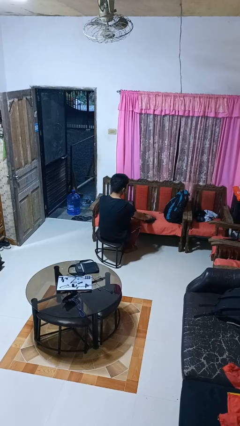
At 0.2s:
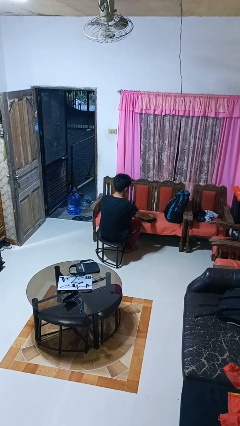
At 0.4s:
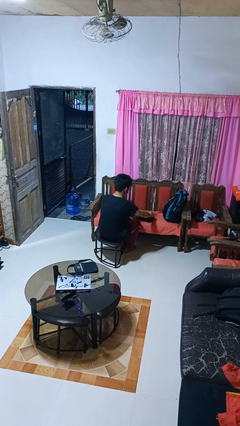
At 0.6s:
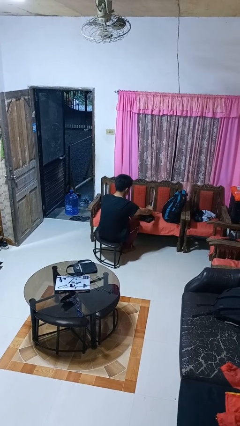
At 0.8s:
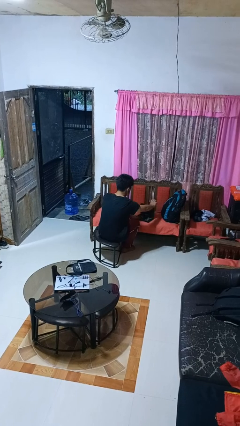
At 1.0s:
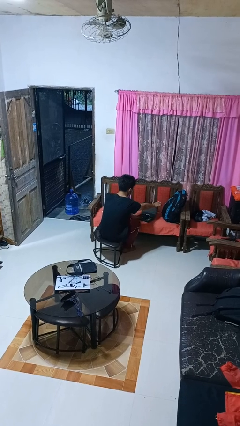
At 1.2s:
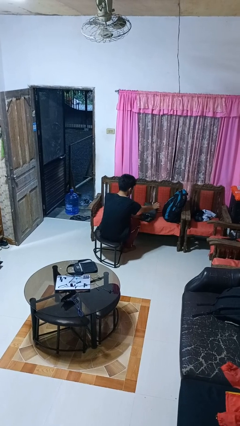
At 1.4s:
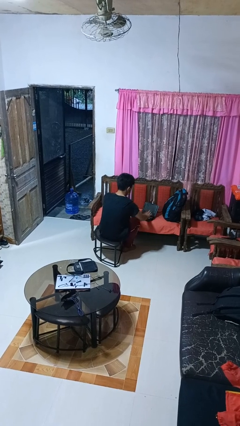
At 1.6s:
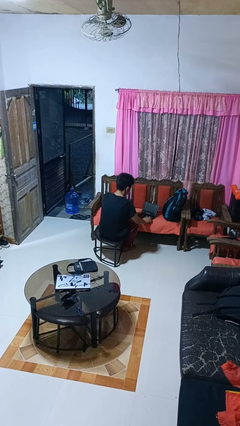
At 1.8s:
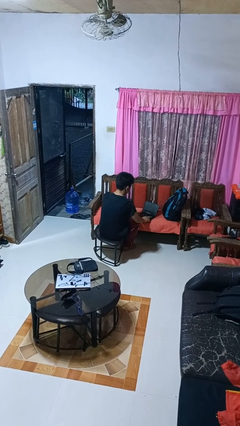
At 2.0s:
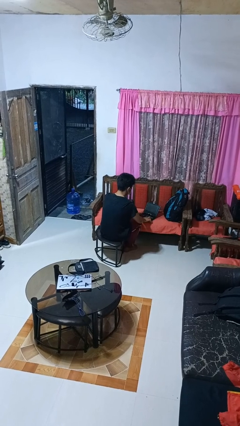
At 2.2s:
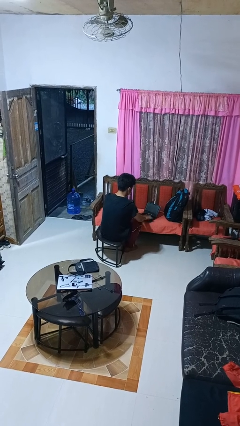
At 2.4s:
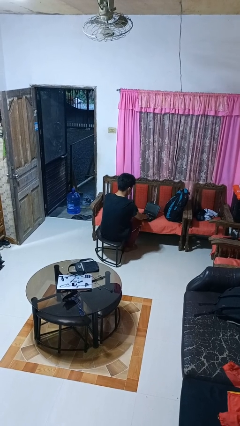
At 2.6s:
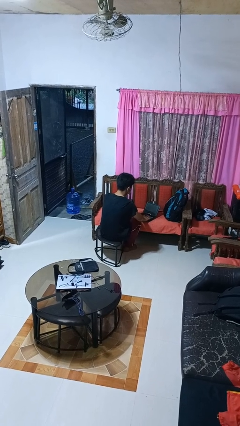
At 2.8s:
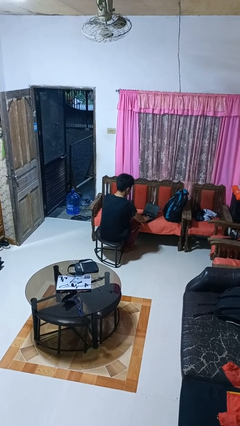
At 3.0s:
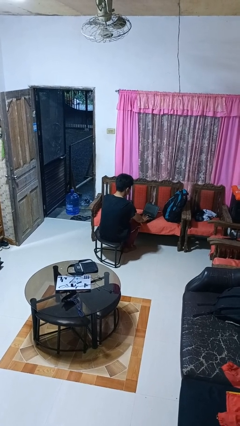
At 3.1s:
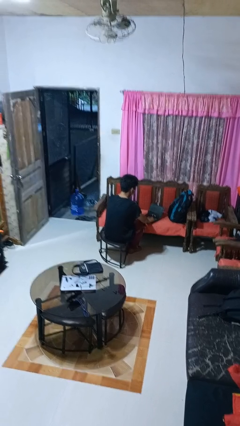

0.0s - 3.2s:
person opens laptop

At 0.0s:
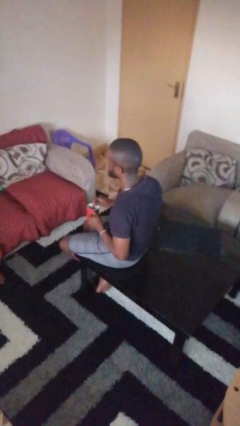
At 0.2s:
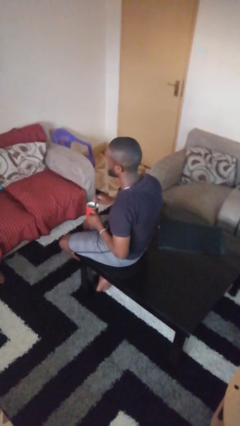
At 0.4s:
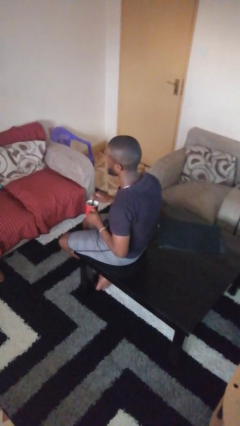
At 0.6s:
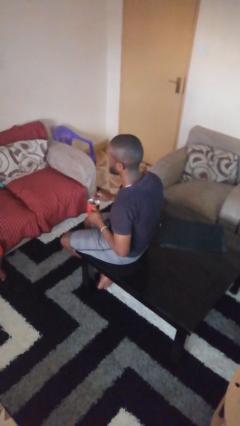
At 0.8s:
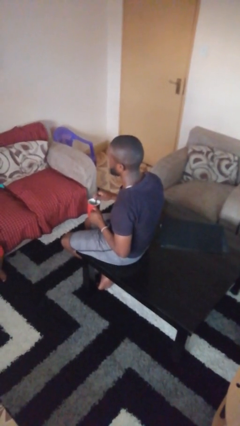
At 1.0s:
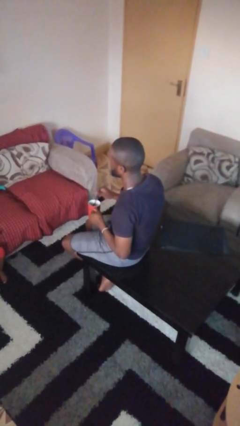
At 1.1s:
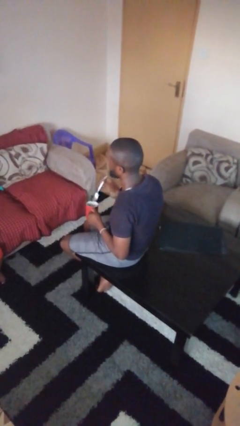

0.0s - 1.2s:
person stirs mug

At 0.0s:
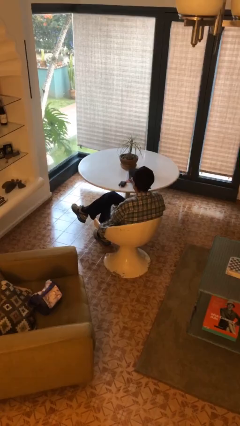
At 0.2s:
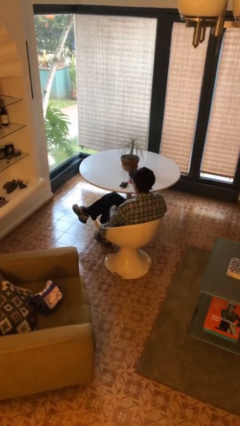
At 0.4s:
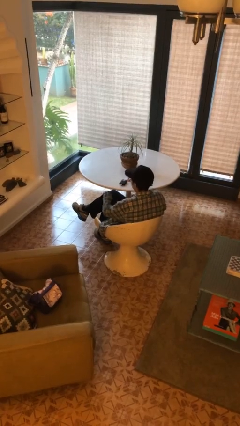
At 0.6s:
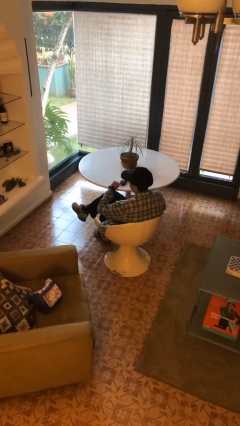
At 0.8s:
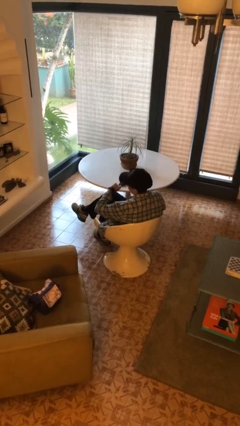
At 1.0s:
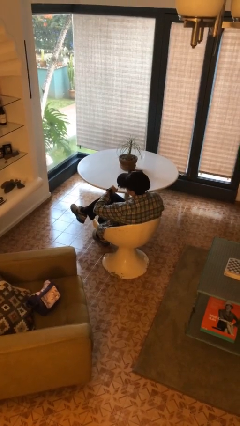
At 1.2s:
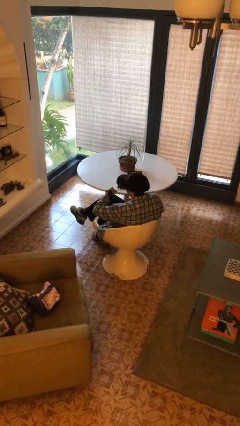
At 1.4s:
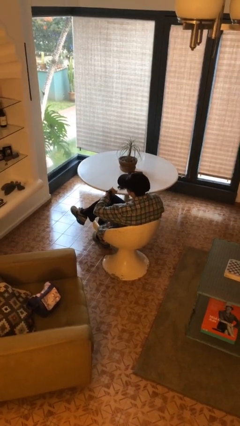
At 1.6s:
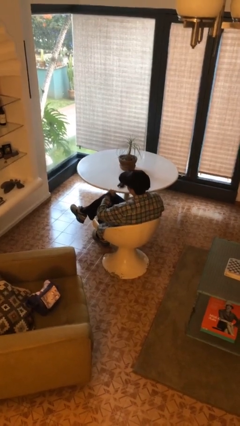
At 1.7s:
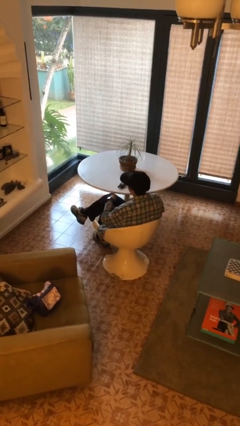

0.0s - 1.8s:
person looks at wristwatch

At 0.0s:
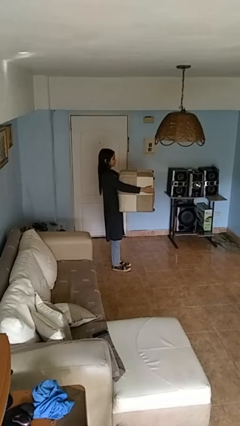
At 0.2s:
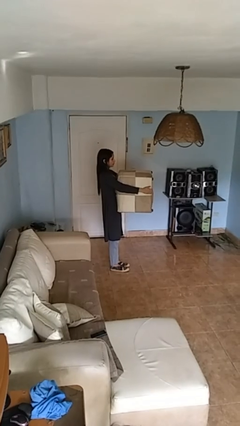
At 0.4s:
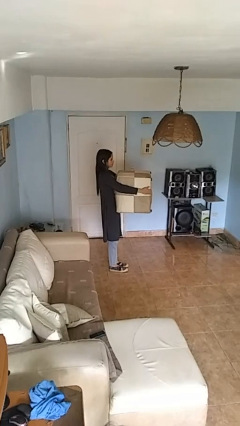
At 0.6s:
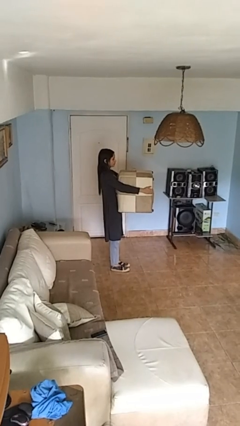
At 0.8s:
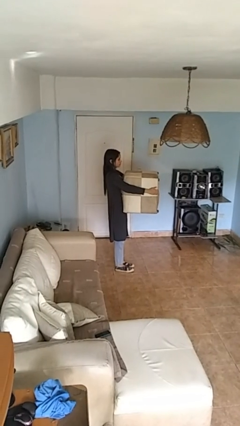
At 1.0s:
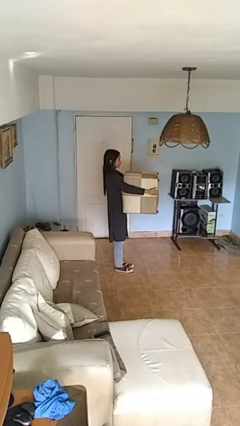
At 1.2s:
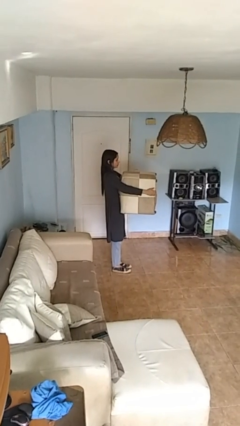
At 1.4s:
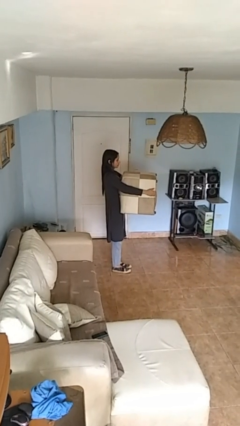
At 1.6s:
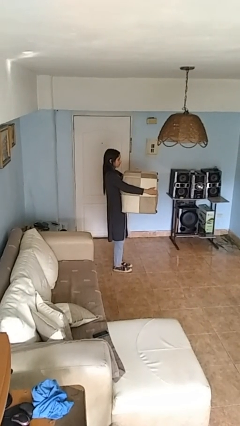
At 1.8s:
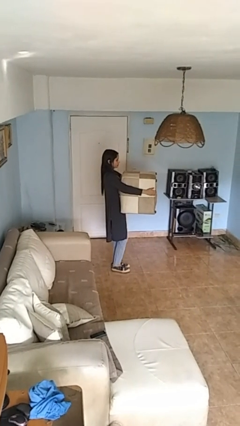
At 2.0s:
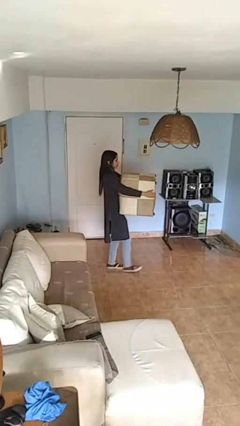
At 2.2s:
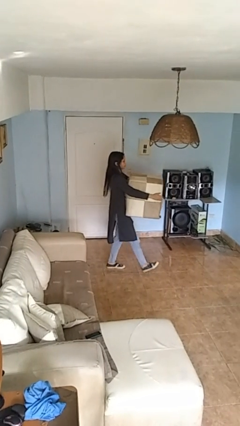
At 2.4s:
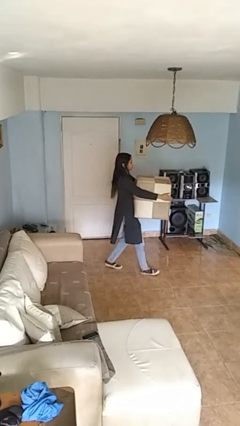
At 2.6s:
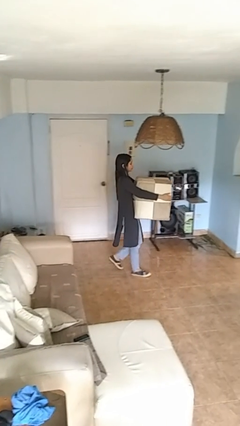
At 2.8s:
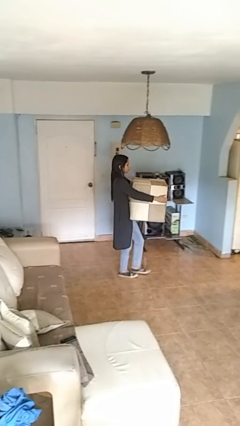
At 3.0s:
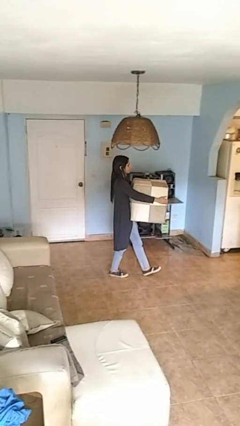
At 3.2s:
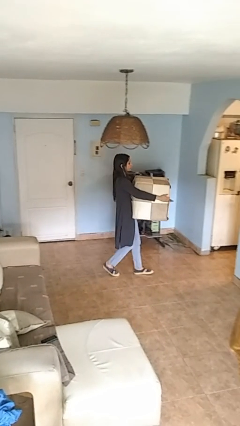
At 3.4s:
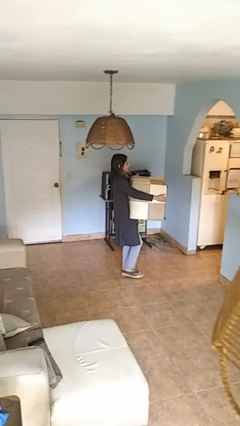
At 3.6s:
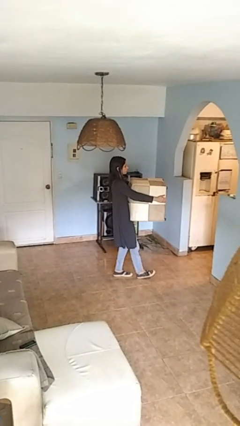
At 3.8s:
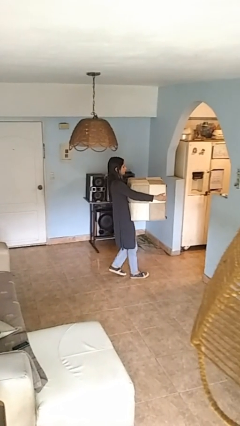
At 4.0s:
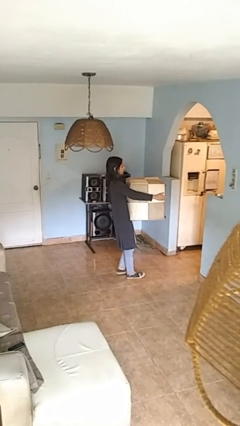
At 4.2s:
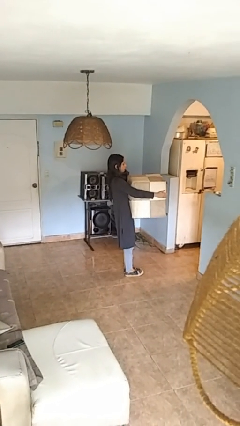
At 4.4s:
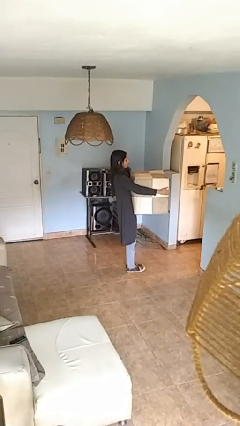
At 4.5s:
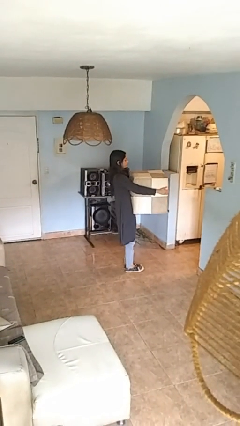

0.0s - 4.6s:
person carries laundry basket

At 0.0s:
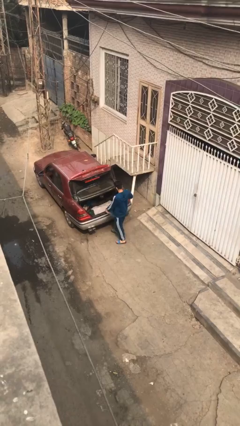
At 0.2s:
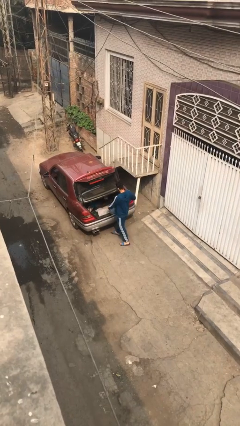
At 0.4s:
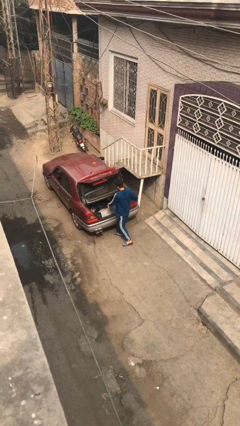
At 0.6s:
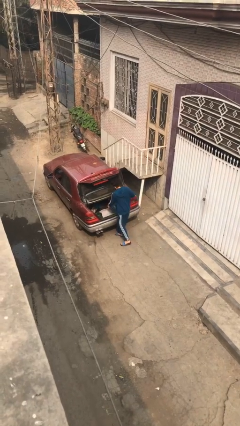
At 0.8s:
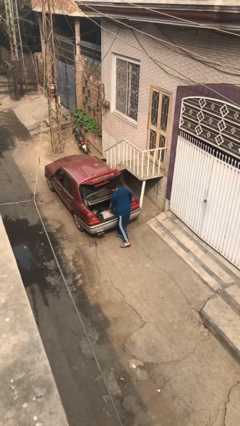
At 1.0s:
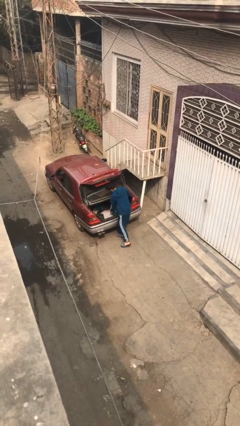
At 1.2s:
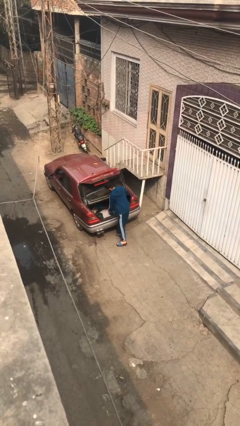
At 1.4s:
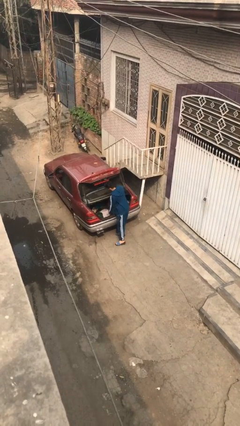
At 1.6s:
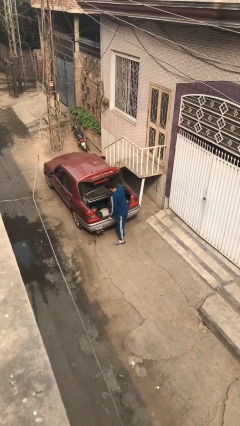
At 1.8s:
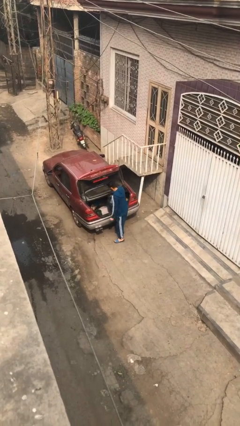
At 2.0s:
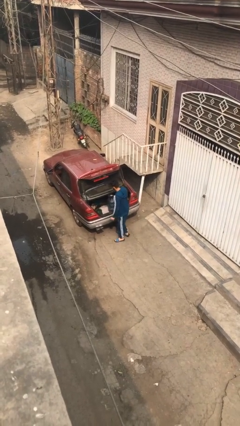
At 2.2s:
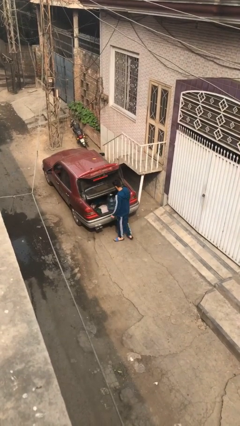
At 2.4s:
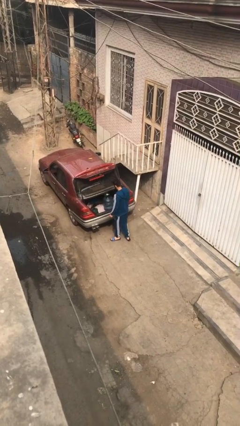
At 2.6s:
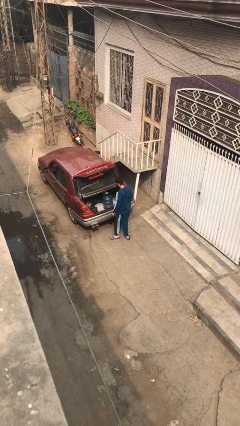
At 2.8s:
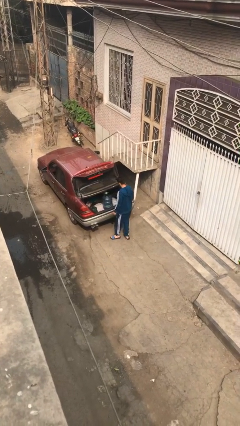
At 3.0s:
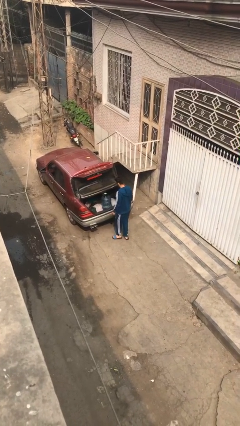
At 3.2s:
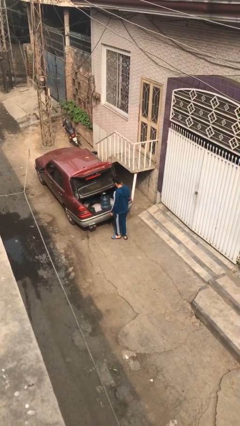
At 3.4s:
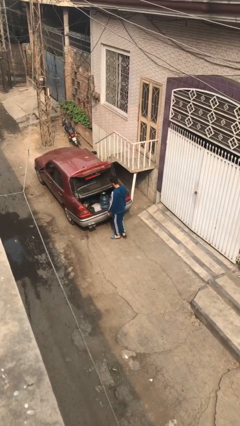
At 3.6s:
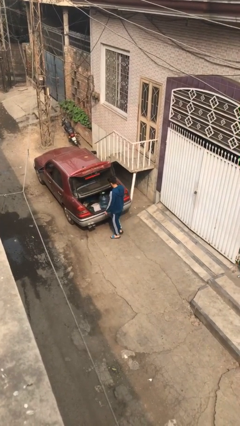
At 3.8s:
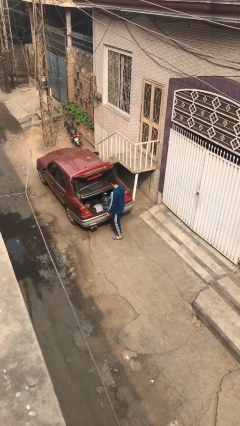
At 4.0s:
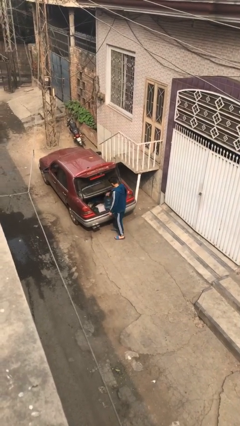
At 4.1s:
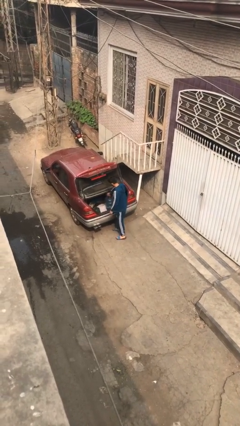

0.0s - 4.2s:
person loads car

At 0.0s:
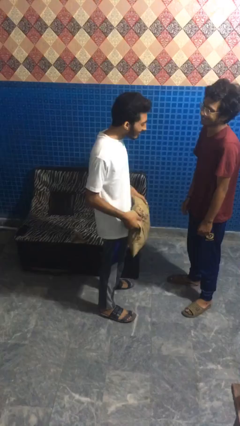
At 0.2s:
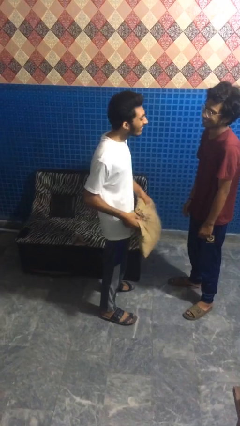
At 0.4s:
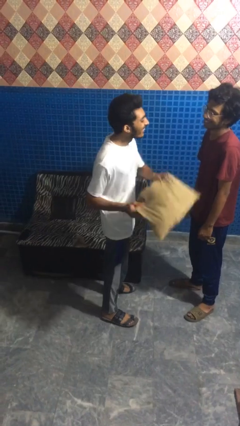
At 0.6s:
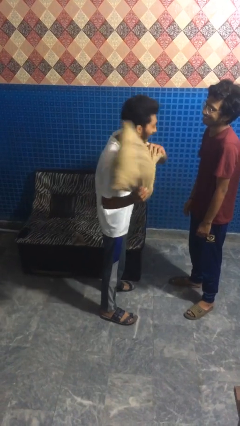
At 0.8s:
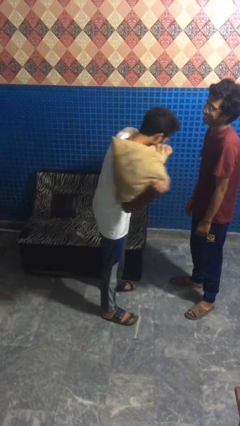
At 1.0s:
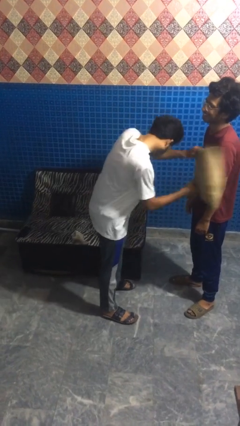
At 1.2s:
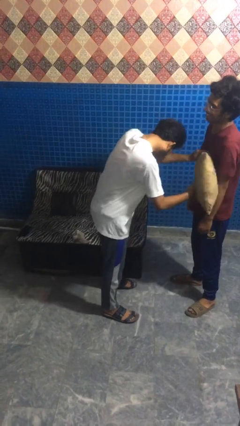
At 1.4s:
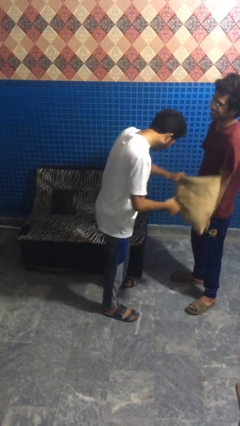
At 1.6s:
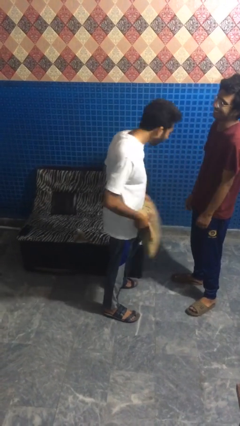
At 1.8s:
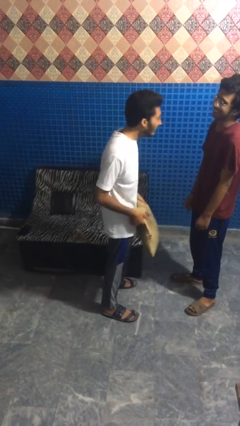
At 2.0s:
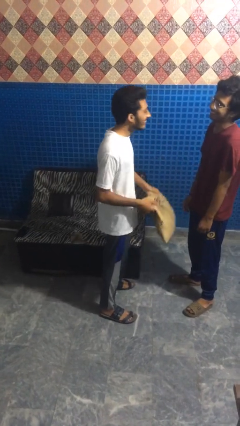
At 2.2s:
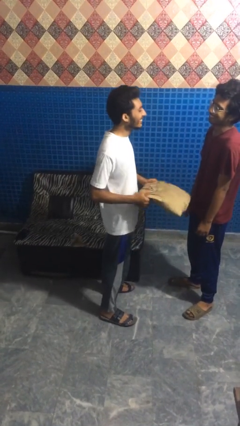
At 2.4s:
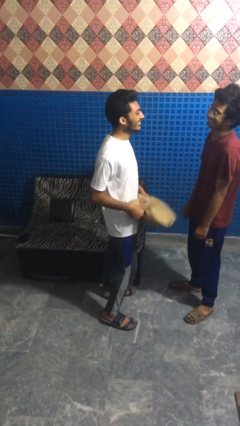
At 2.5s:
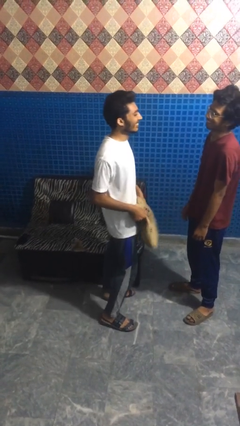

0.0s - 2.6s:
person hits person with pillow
